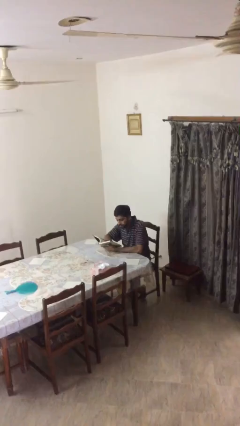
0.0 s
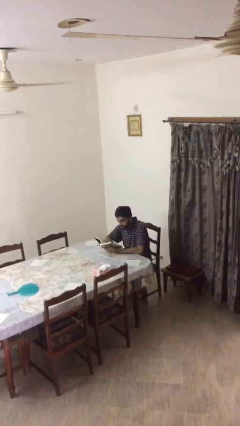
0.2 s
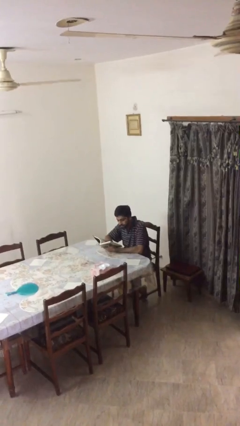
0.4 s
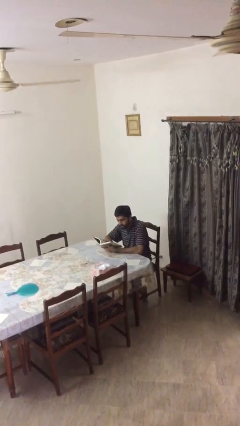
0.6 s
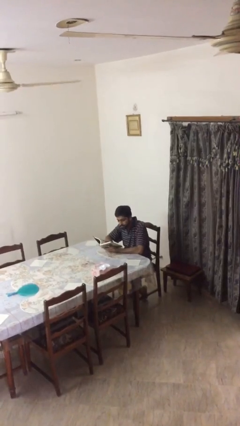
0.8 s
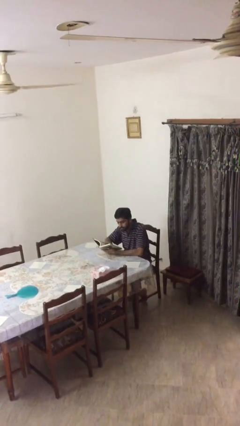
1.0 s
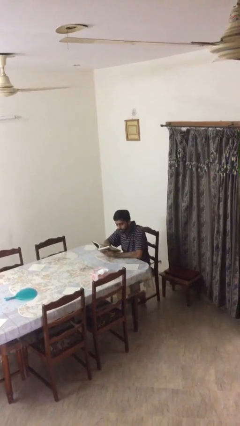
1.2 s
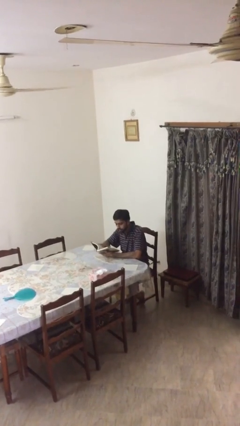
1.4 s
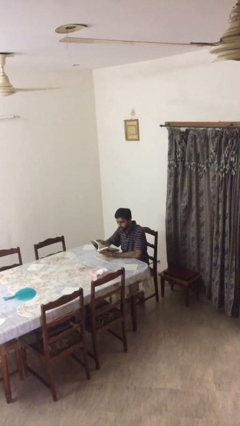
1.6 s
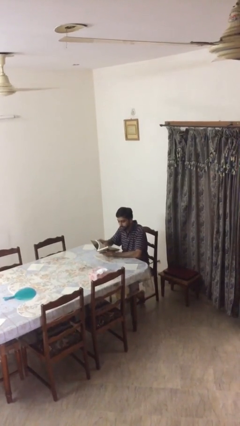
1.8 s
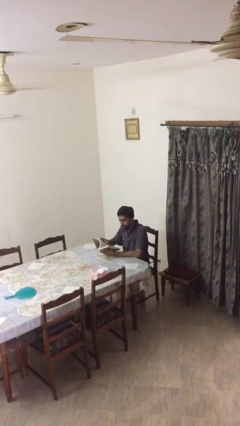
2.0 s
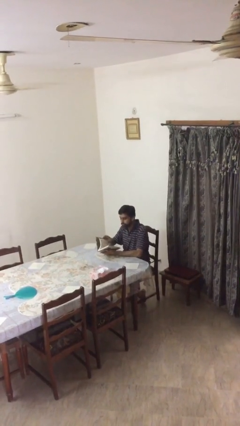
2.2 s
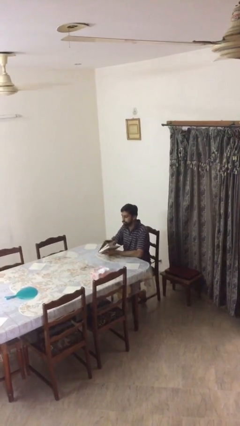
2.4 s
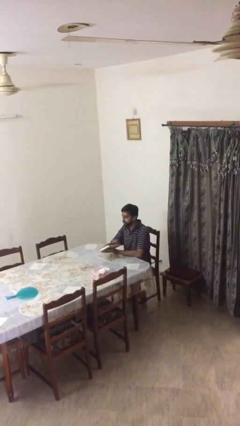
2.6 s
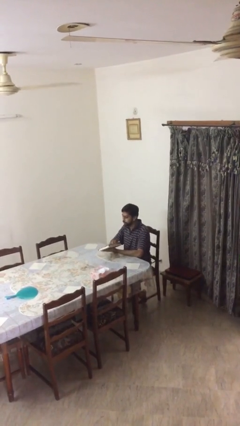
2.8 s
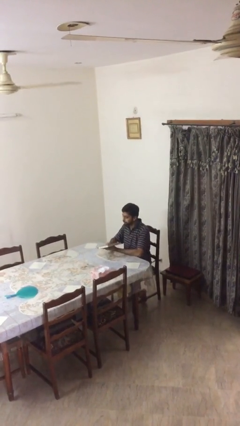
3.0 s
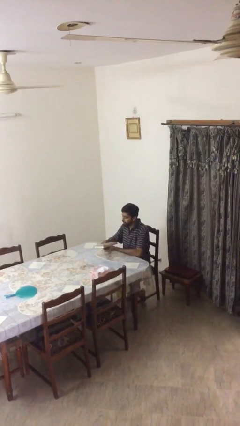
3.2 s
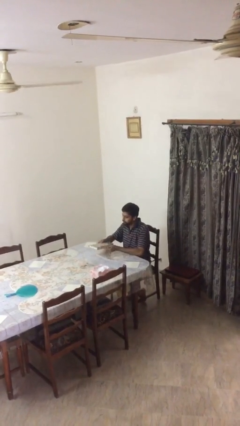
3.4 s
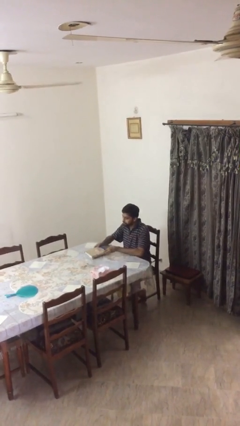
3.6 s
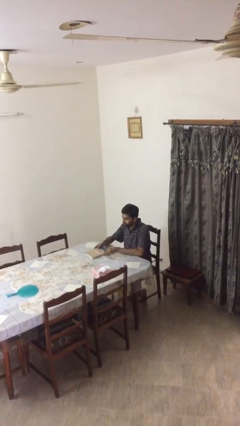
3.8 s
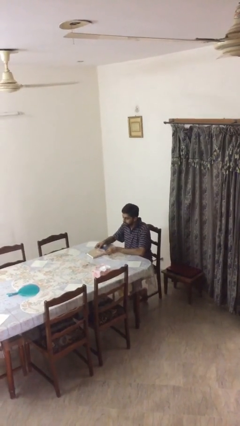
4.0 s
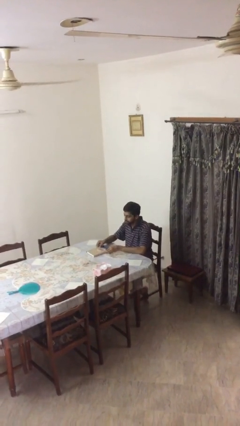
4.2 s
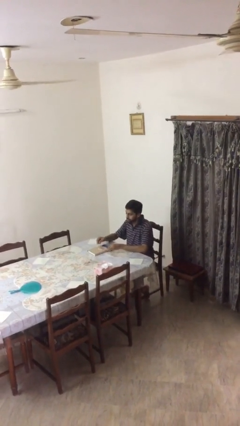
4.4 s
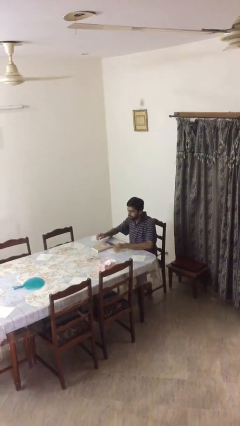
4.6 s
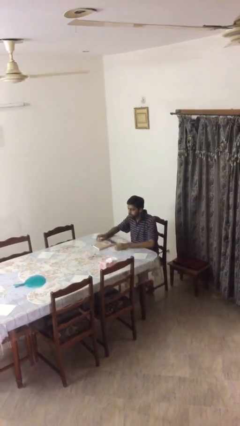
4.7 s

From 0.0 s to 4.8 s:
person puts down object on table

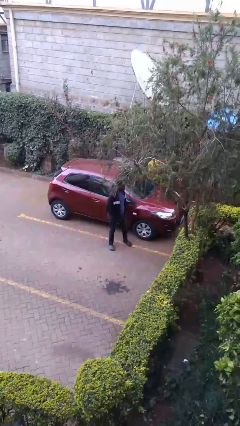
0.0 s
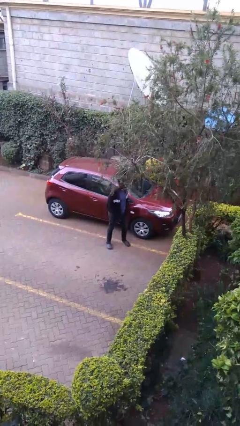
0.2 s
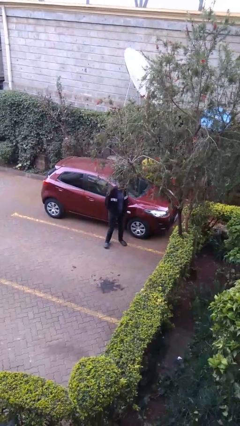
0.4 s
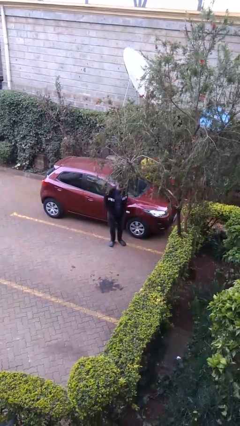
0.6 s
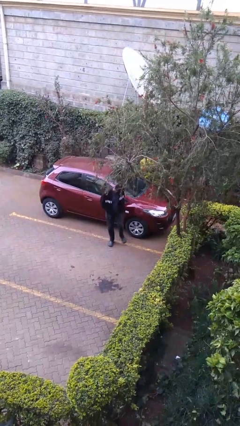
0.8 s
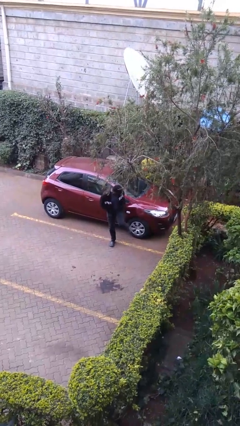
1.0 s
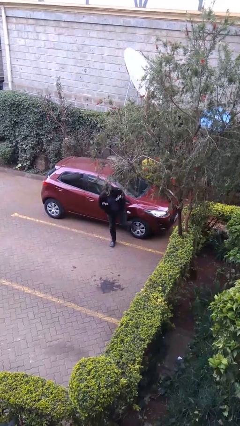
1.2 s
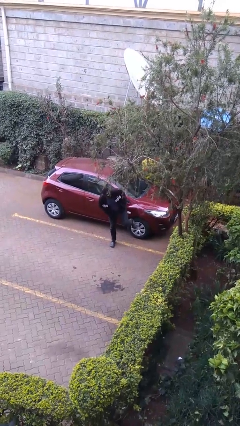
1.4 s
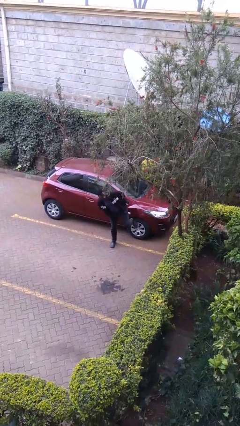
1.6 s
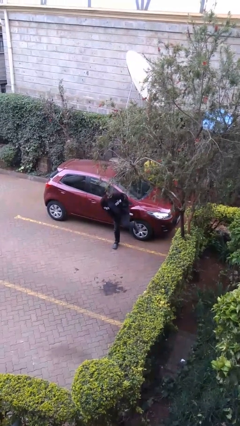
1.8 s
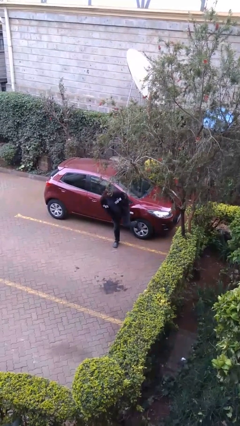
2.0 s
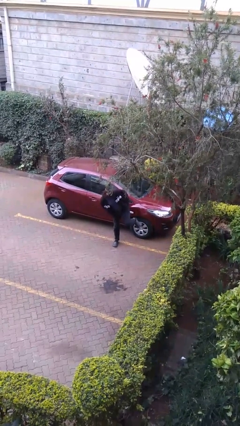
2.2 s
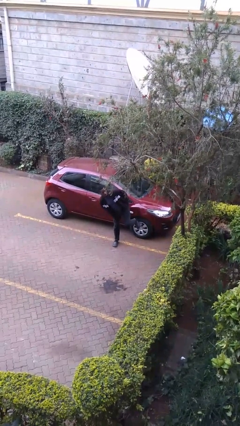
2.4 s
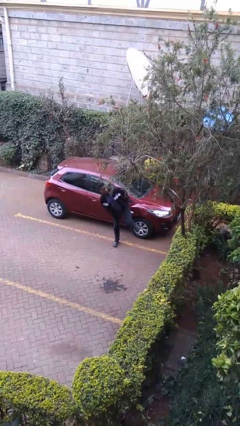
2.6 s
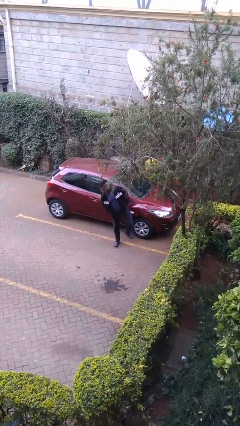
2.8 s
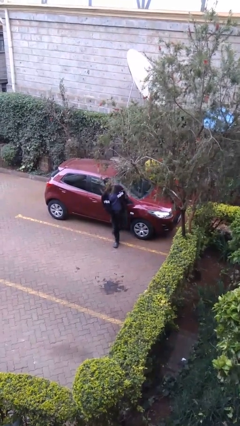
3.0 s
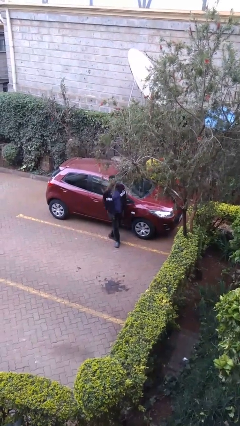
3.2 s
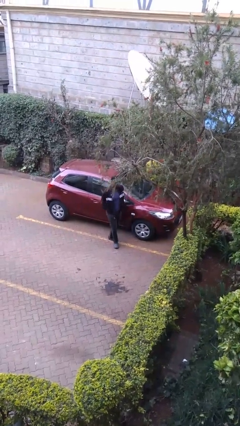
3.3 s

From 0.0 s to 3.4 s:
person kicks car tires

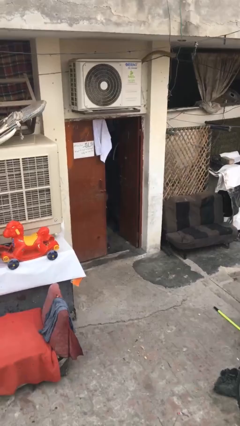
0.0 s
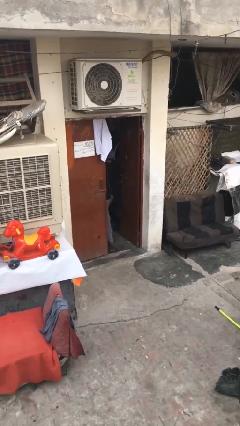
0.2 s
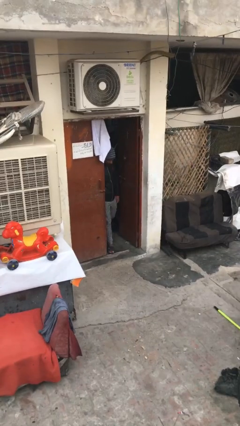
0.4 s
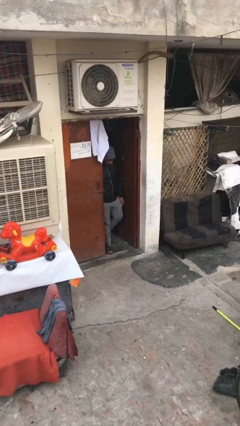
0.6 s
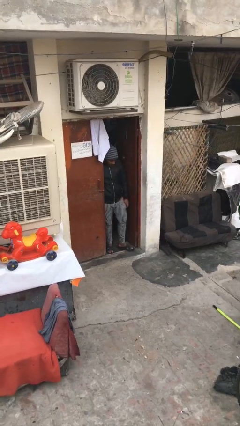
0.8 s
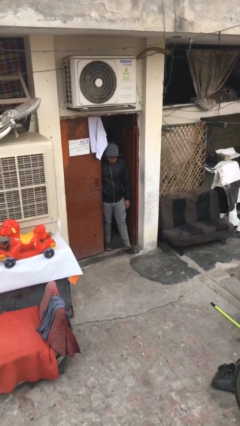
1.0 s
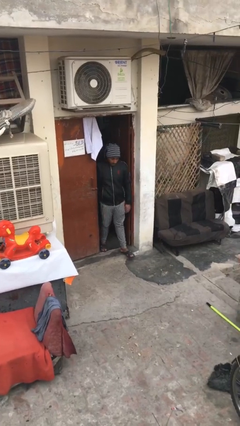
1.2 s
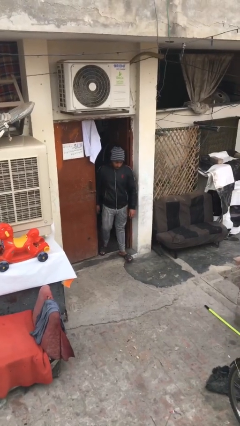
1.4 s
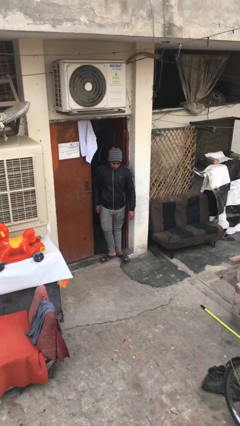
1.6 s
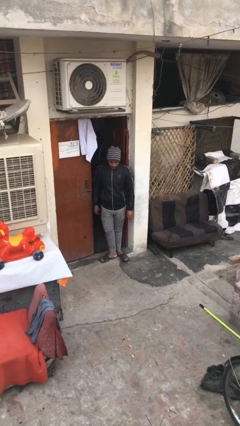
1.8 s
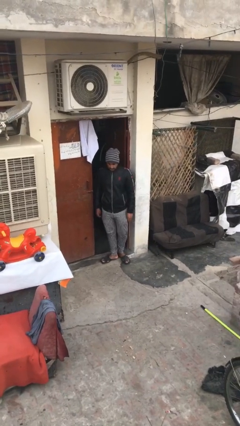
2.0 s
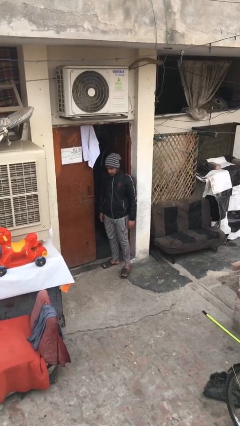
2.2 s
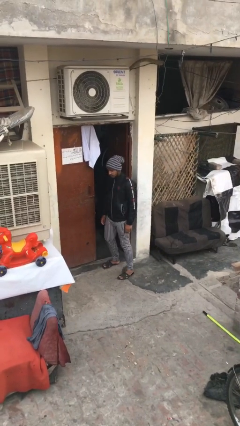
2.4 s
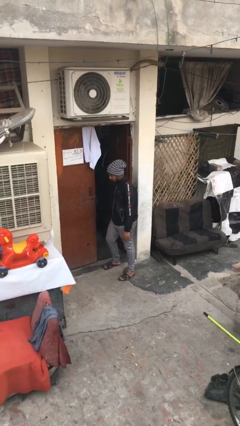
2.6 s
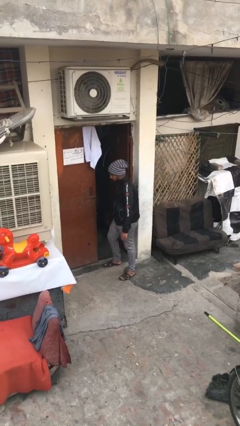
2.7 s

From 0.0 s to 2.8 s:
person enters scene through structure

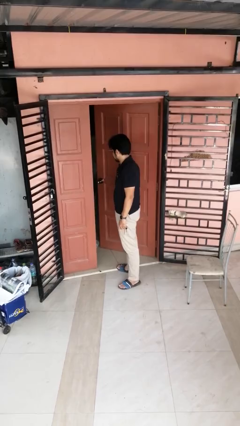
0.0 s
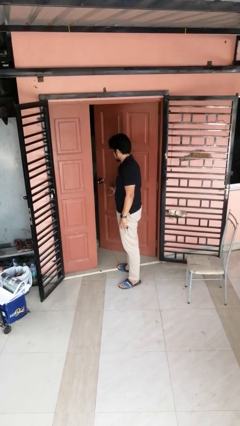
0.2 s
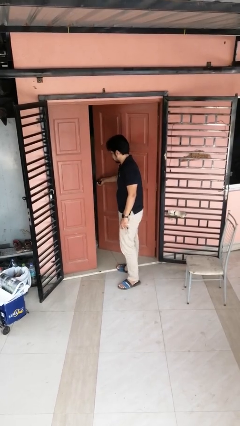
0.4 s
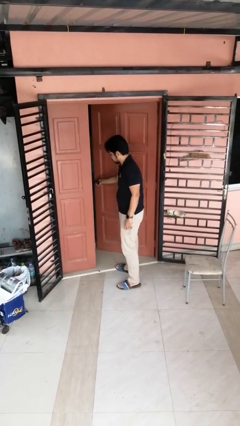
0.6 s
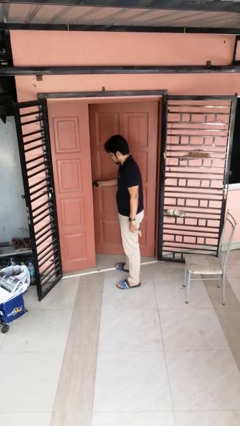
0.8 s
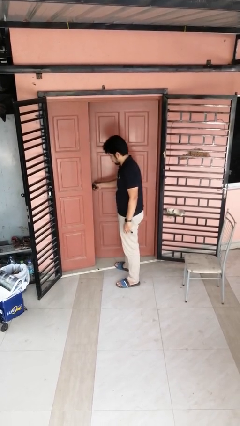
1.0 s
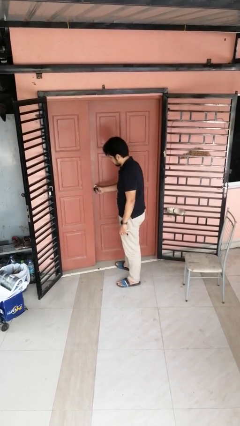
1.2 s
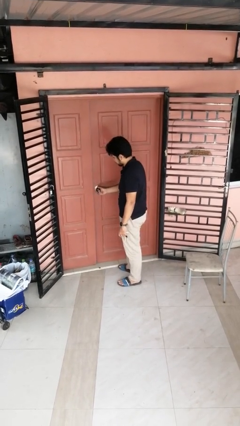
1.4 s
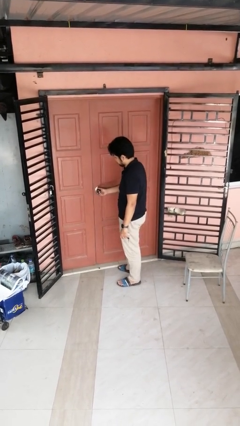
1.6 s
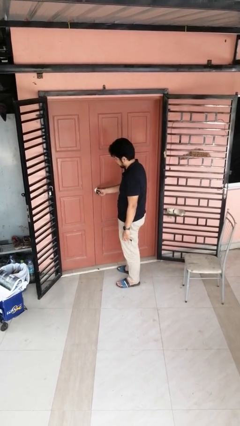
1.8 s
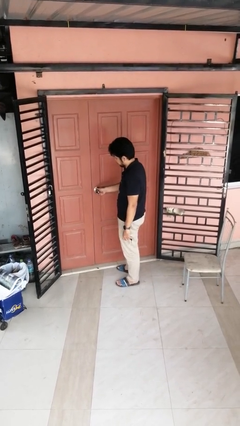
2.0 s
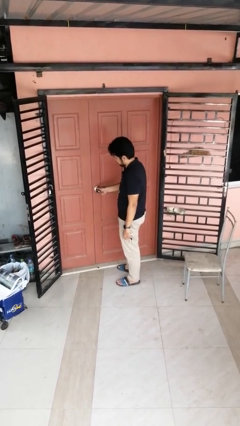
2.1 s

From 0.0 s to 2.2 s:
person closes facility door

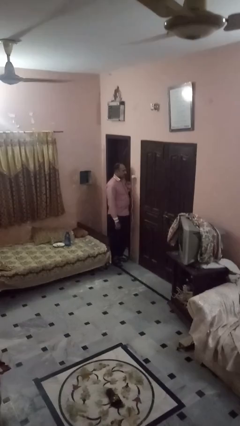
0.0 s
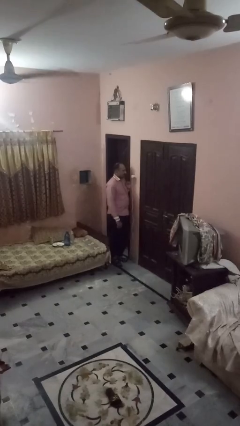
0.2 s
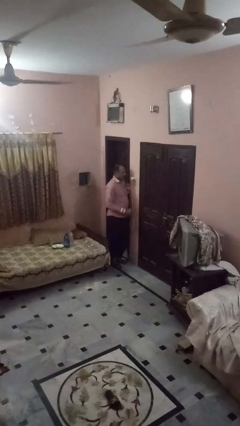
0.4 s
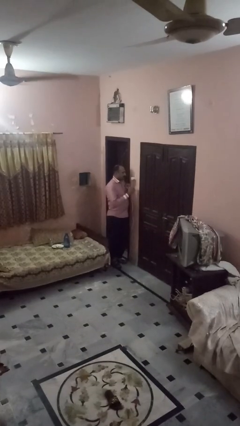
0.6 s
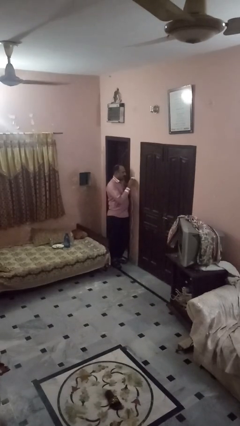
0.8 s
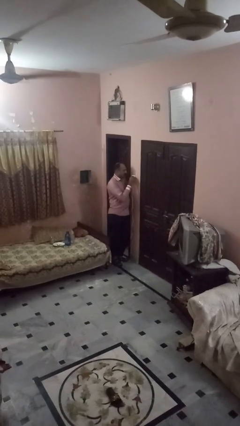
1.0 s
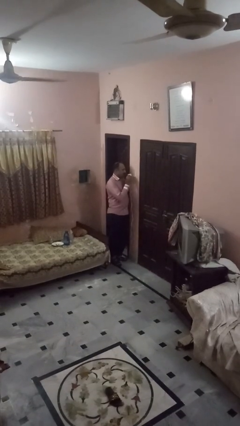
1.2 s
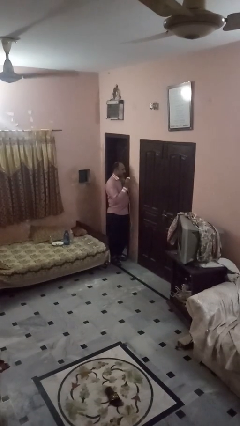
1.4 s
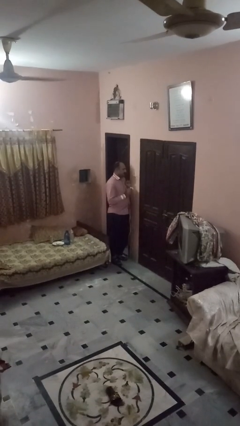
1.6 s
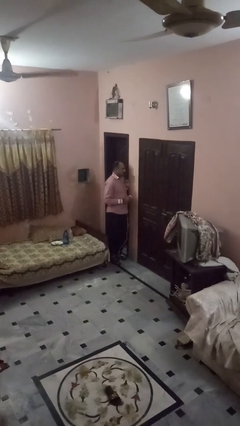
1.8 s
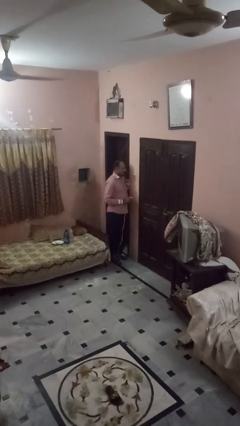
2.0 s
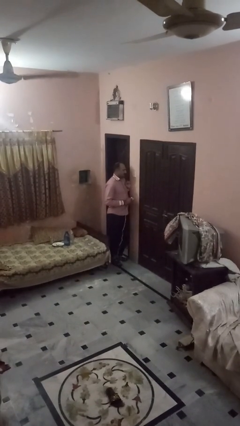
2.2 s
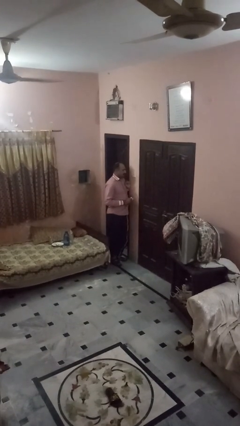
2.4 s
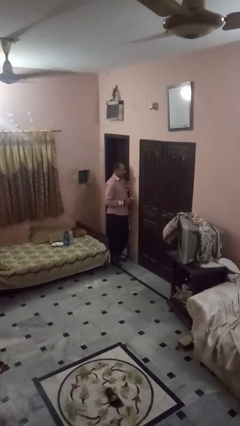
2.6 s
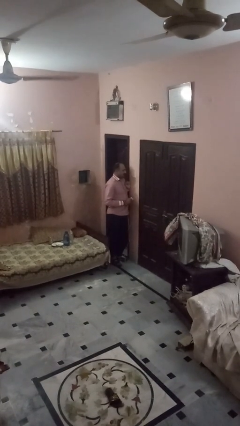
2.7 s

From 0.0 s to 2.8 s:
person unplugs from electrical socket

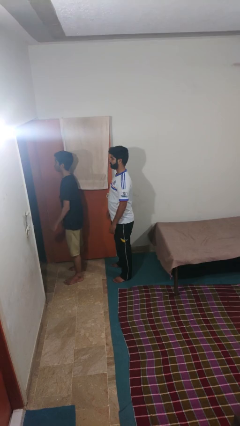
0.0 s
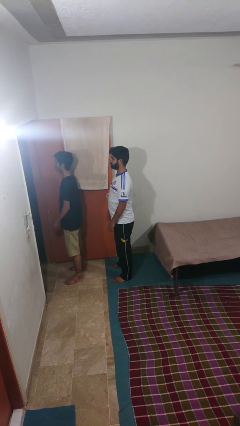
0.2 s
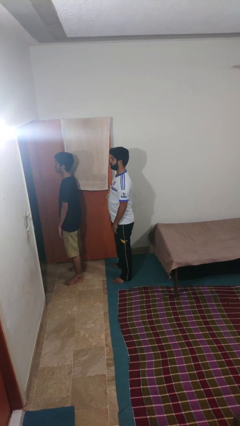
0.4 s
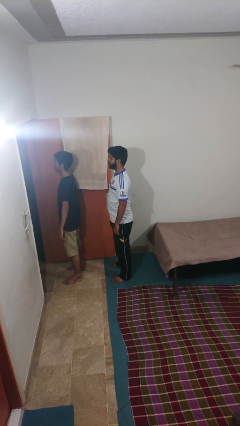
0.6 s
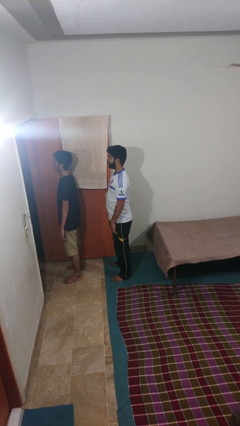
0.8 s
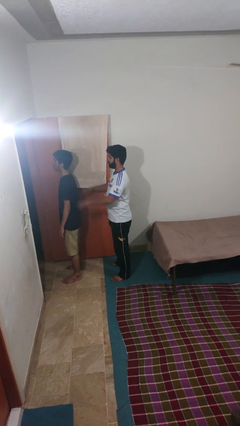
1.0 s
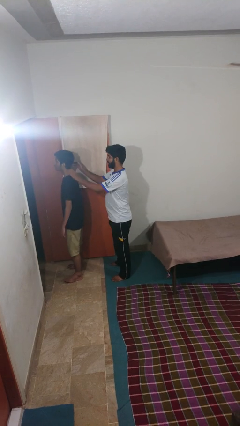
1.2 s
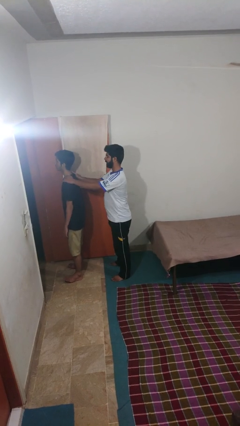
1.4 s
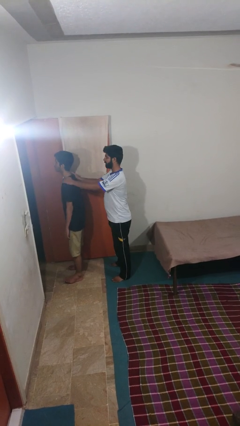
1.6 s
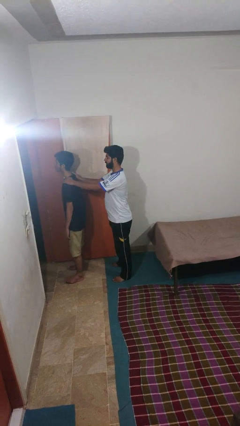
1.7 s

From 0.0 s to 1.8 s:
person grabs person by shoulder
